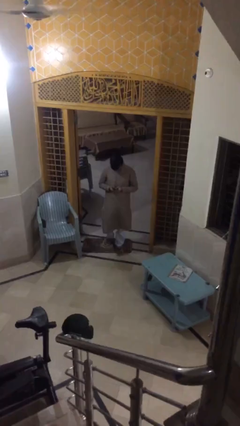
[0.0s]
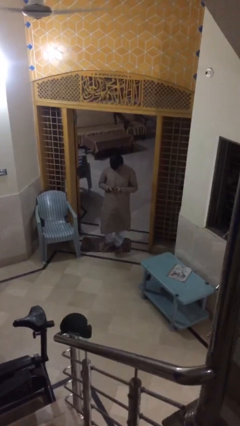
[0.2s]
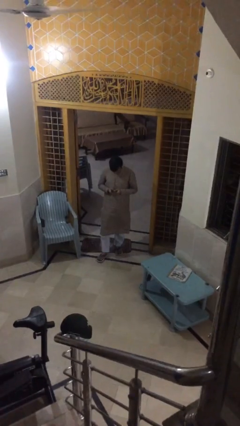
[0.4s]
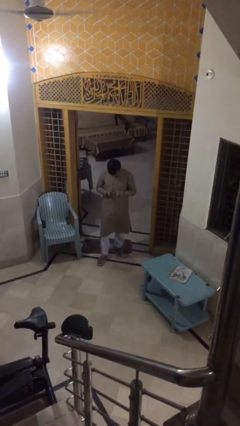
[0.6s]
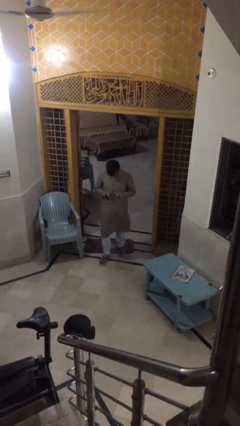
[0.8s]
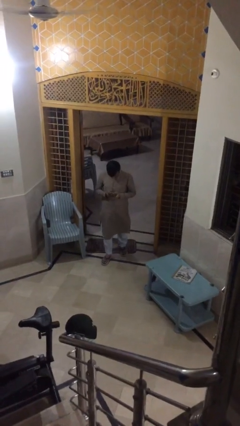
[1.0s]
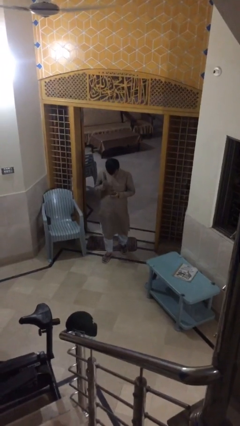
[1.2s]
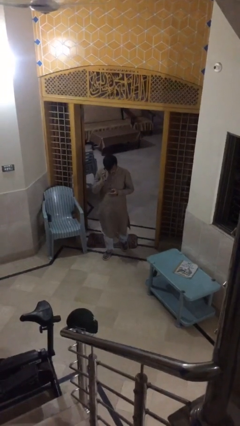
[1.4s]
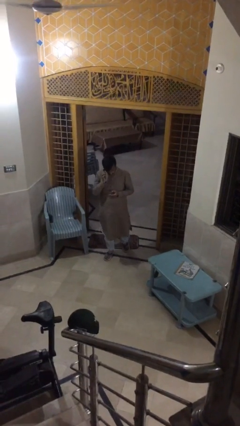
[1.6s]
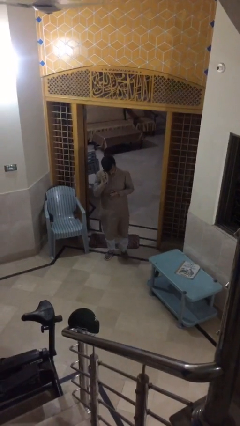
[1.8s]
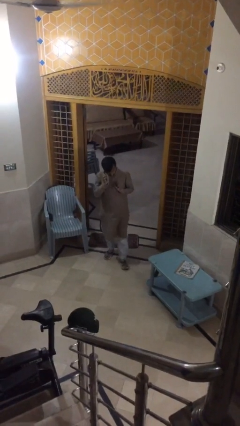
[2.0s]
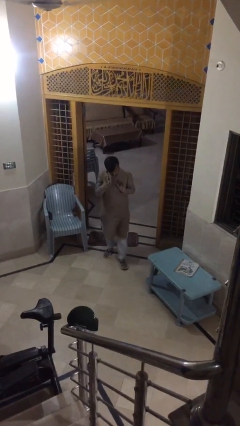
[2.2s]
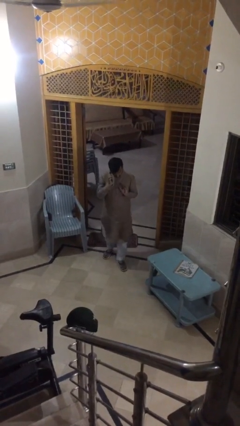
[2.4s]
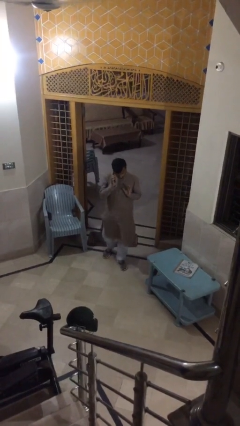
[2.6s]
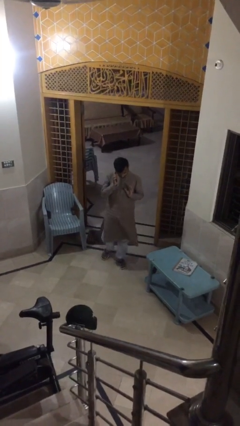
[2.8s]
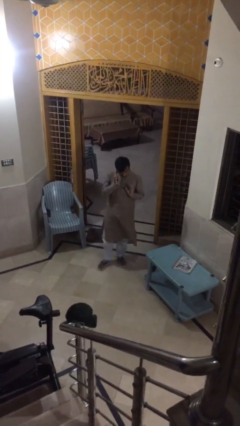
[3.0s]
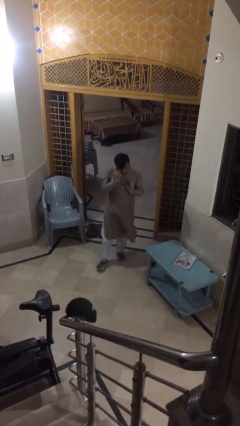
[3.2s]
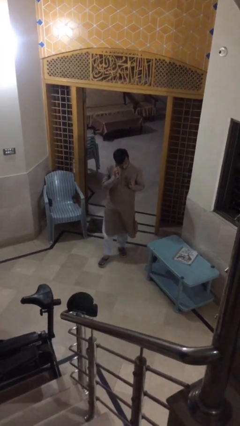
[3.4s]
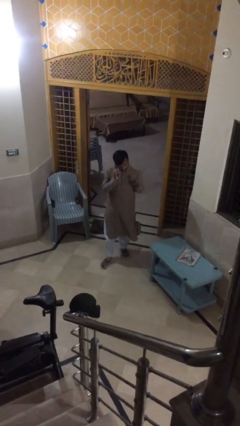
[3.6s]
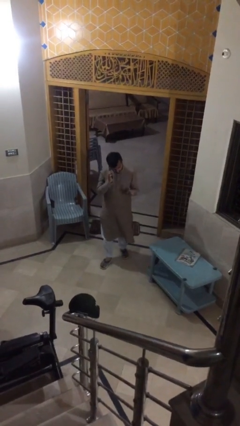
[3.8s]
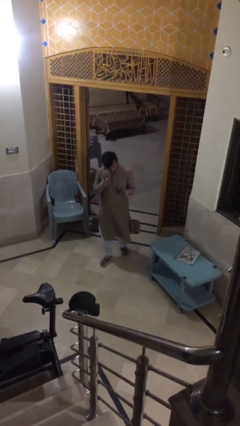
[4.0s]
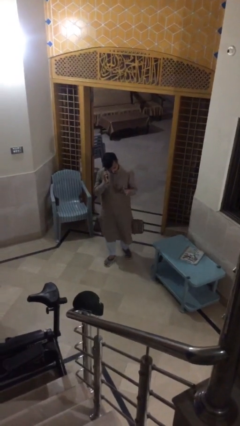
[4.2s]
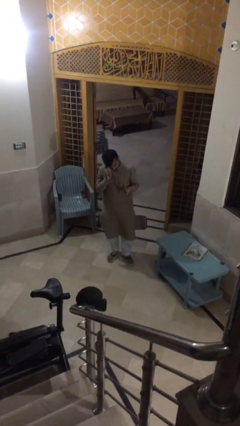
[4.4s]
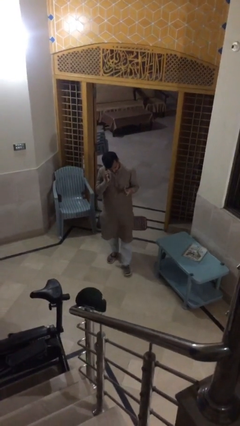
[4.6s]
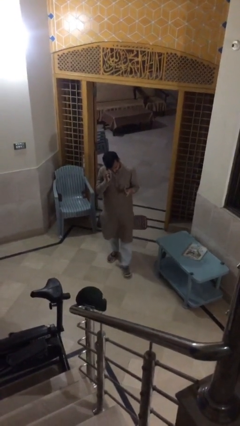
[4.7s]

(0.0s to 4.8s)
person talks on phone

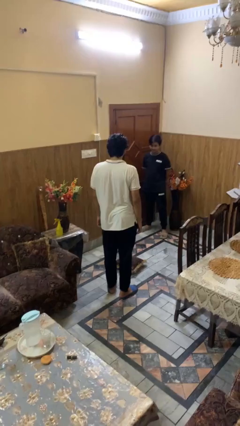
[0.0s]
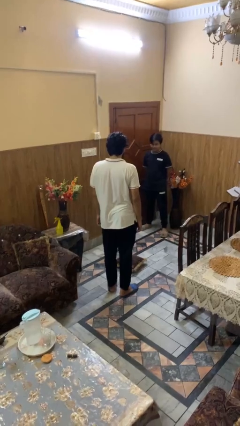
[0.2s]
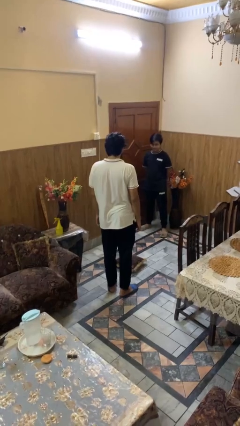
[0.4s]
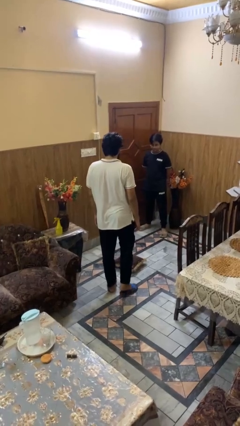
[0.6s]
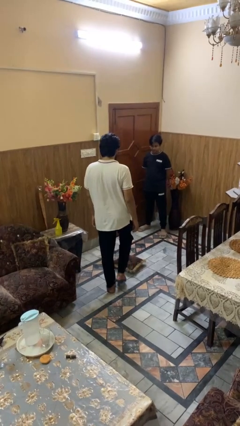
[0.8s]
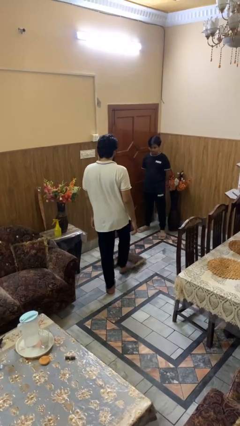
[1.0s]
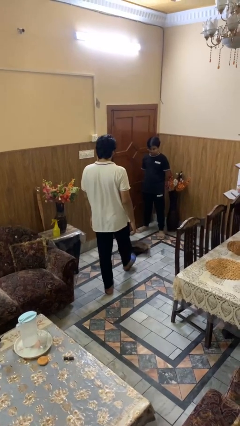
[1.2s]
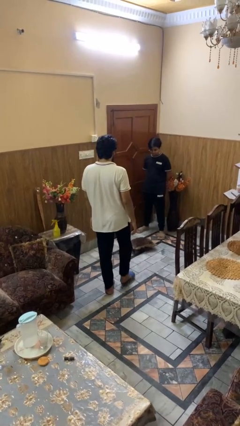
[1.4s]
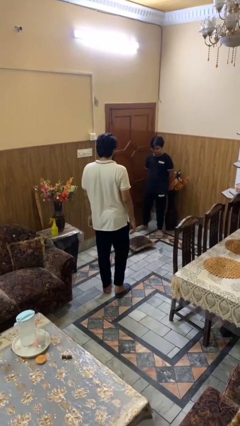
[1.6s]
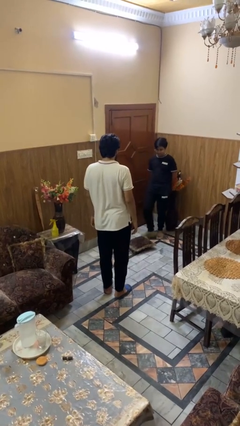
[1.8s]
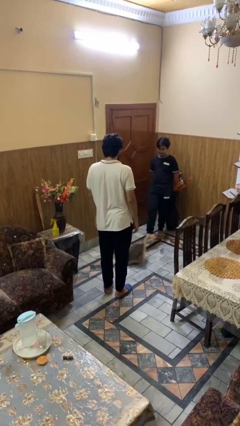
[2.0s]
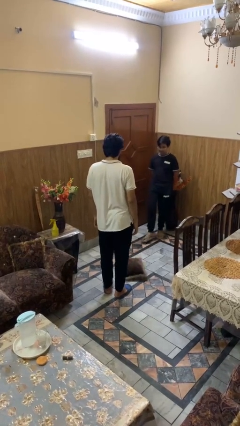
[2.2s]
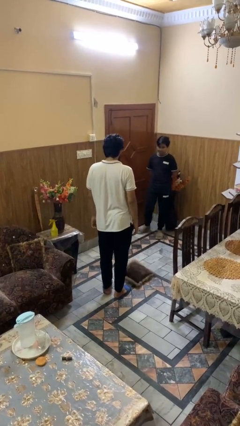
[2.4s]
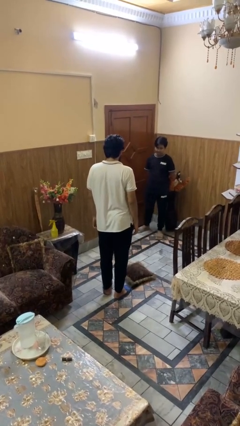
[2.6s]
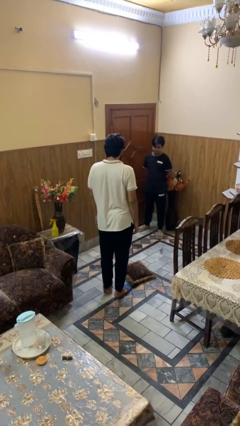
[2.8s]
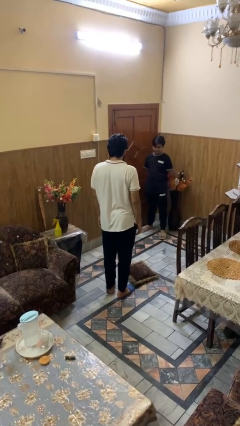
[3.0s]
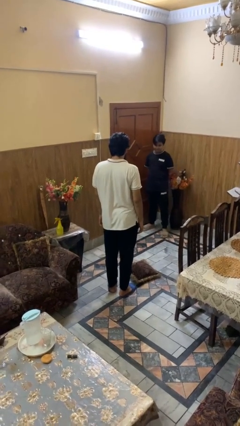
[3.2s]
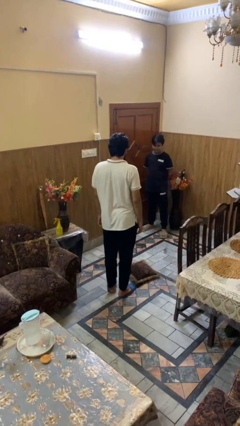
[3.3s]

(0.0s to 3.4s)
person kicks object to person

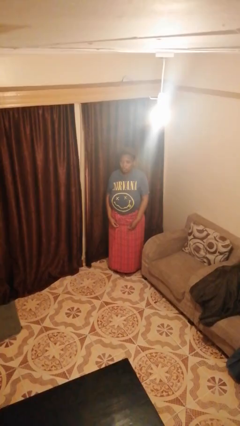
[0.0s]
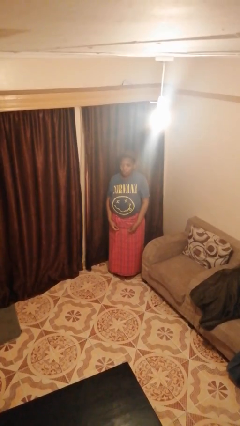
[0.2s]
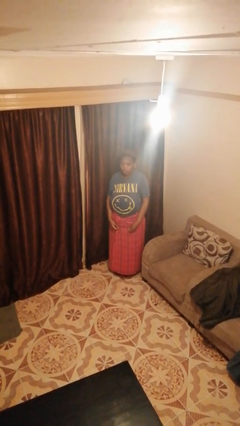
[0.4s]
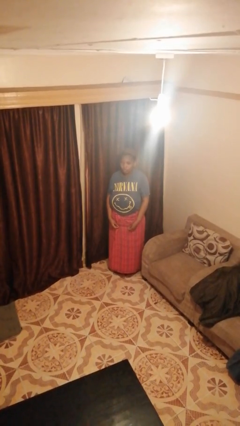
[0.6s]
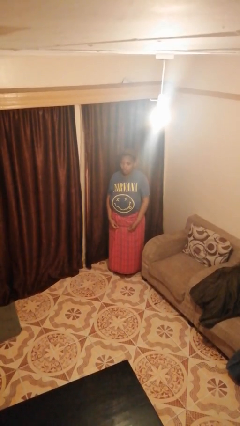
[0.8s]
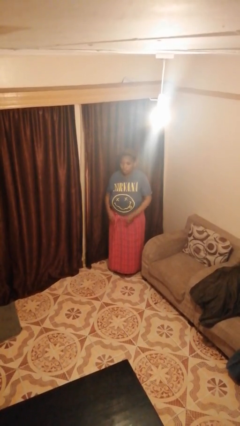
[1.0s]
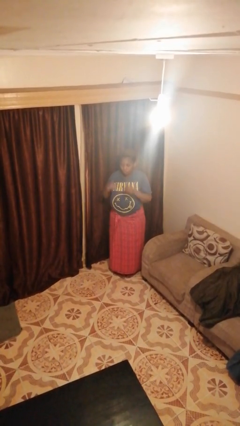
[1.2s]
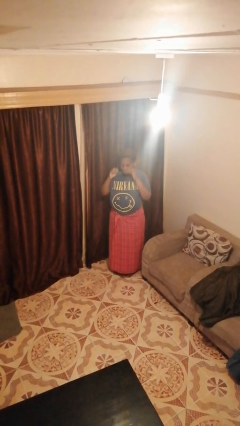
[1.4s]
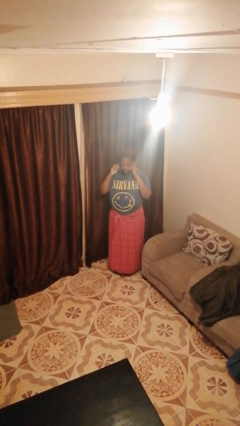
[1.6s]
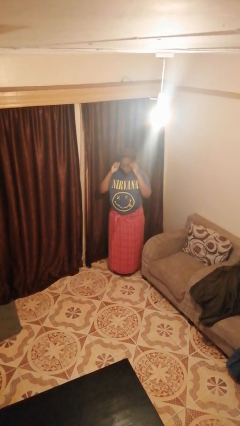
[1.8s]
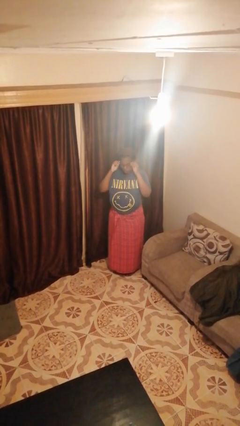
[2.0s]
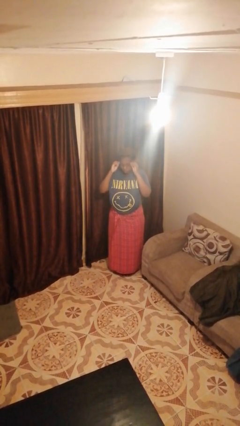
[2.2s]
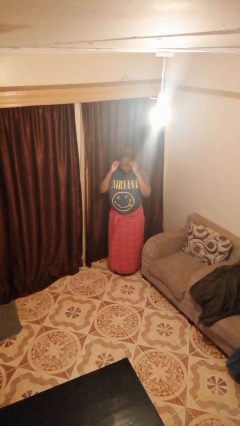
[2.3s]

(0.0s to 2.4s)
person puts on glasses

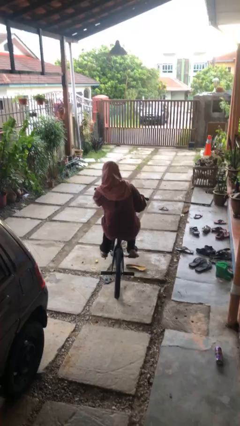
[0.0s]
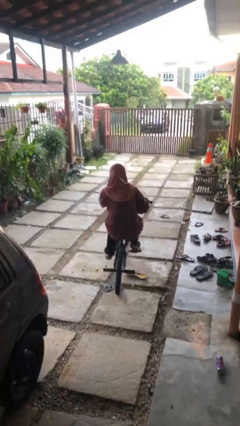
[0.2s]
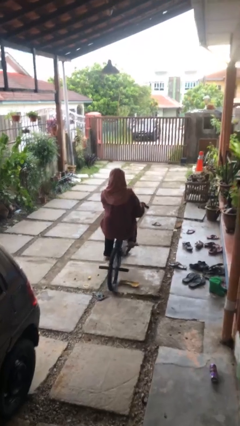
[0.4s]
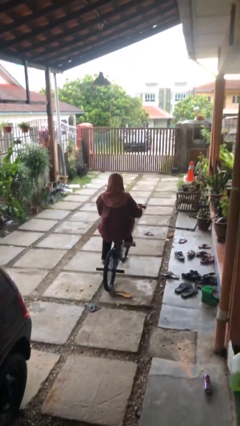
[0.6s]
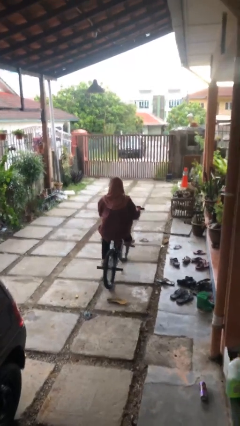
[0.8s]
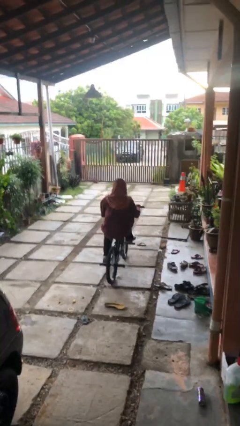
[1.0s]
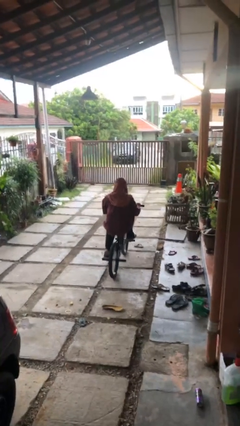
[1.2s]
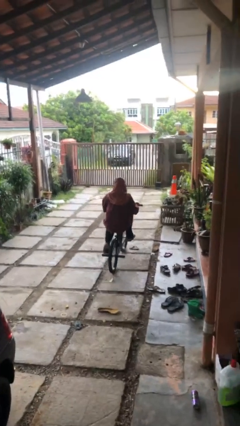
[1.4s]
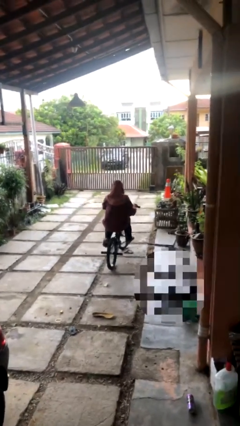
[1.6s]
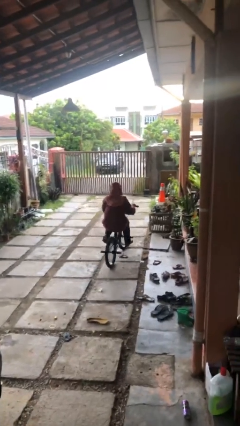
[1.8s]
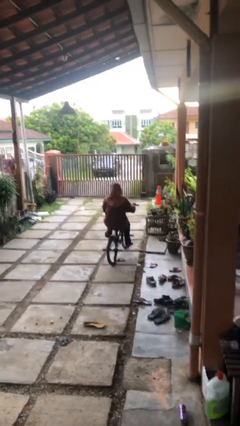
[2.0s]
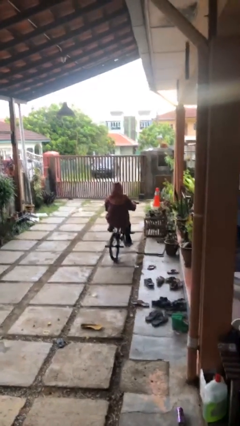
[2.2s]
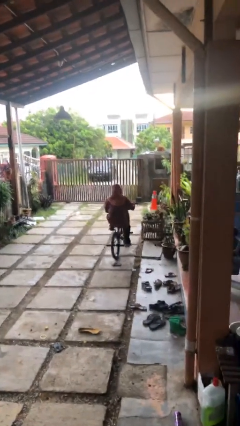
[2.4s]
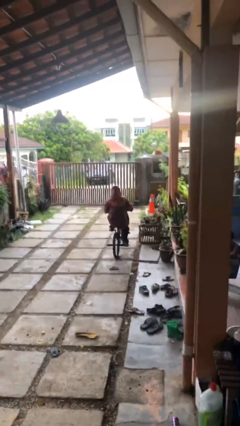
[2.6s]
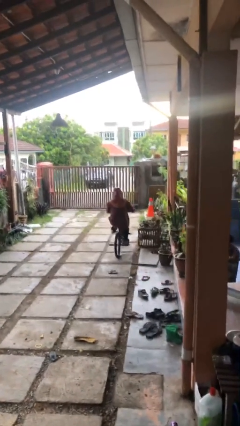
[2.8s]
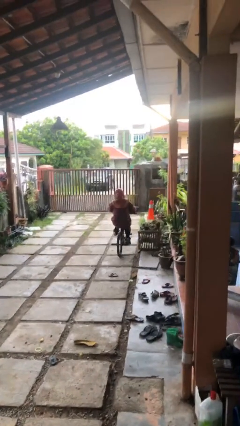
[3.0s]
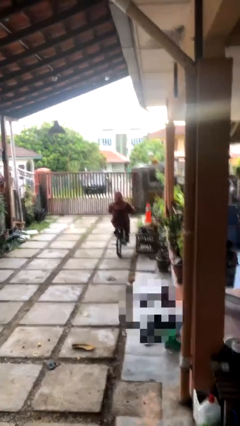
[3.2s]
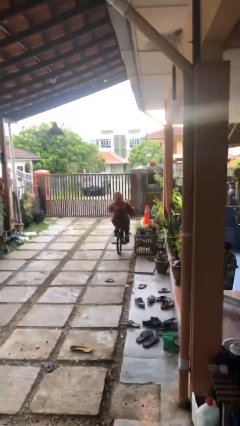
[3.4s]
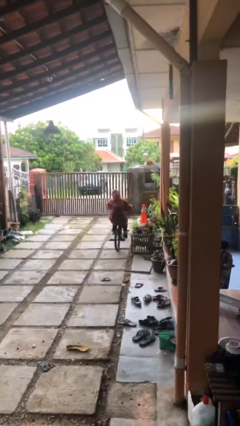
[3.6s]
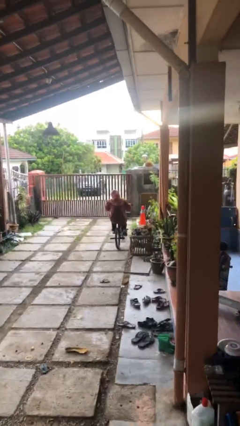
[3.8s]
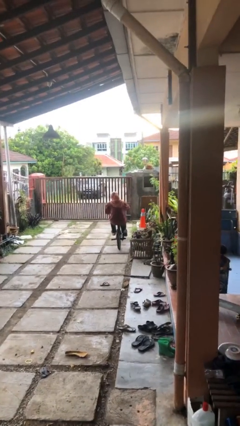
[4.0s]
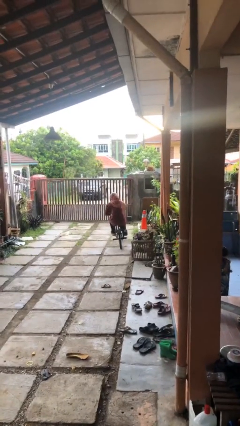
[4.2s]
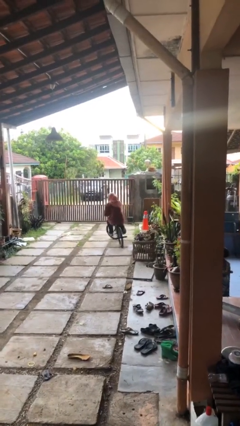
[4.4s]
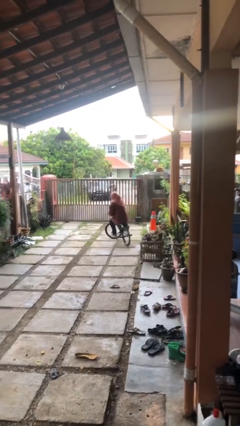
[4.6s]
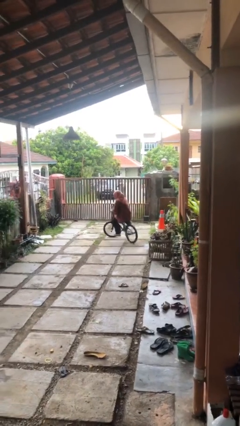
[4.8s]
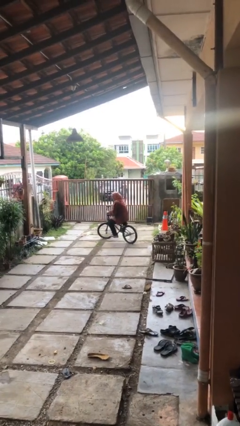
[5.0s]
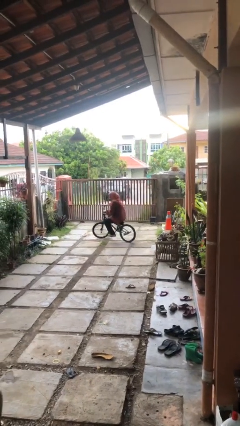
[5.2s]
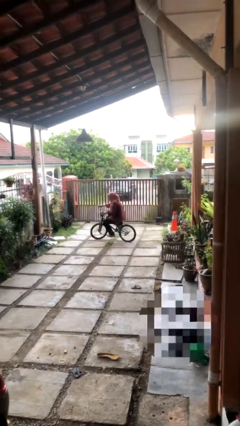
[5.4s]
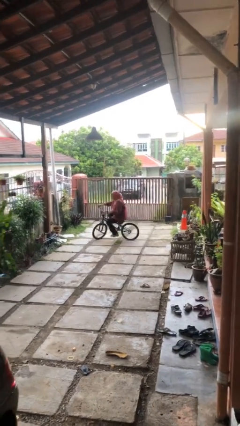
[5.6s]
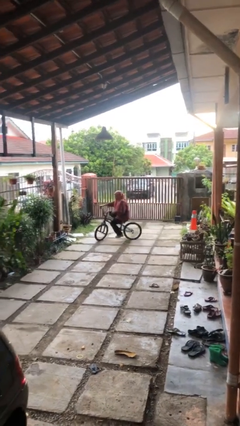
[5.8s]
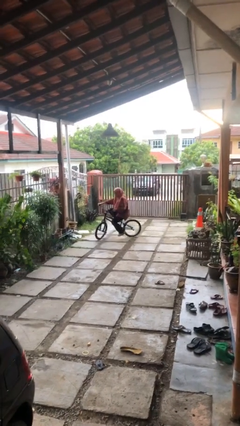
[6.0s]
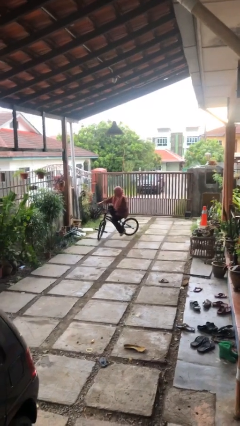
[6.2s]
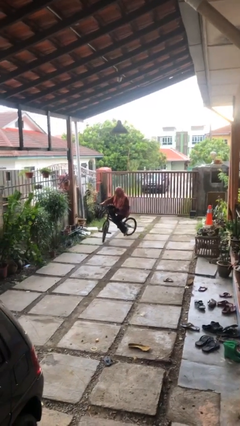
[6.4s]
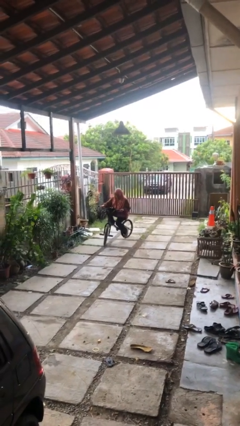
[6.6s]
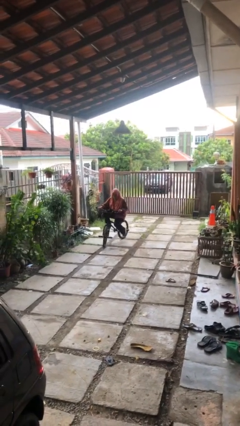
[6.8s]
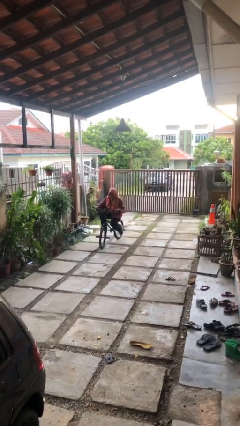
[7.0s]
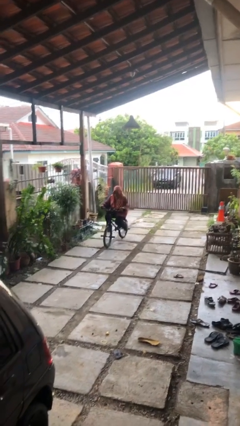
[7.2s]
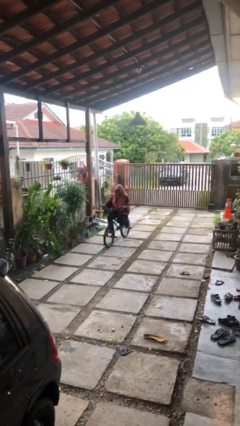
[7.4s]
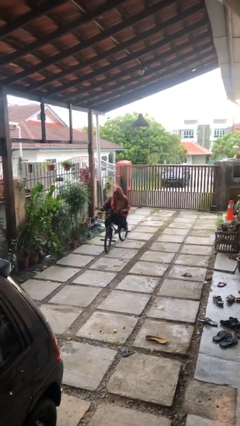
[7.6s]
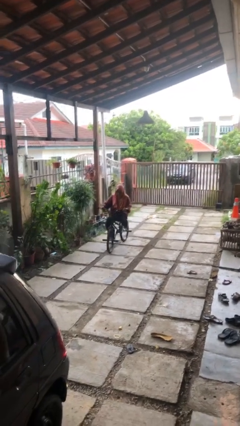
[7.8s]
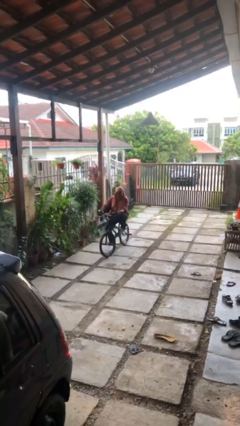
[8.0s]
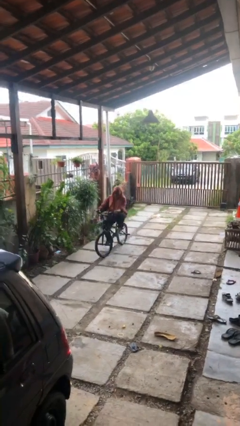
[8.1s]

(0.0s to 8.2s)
person rides bicycle
